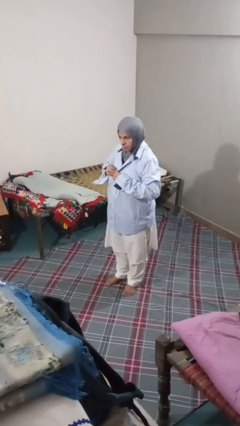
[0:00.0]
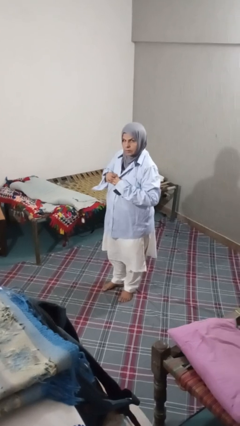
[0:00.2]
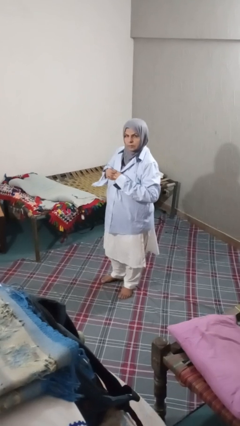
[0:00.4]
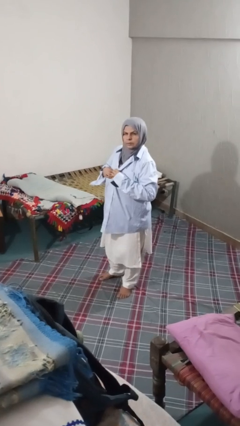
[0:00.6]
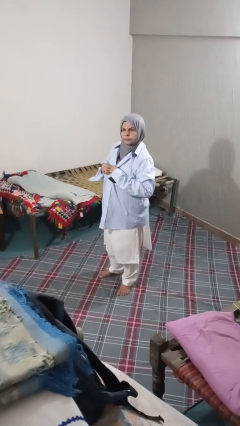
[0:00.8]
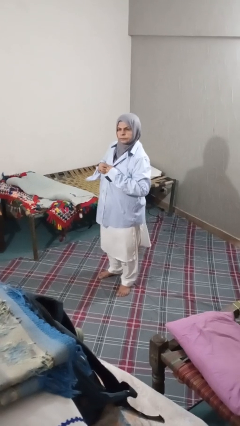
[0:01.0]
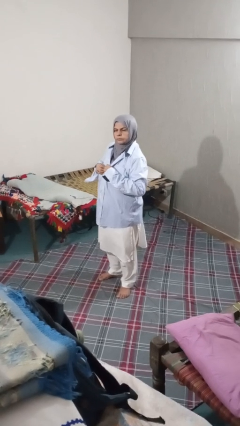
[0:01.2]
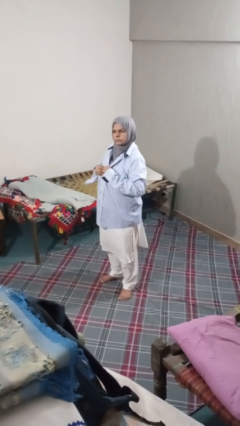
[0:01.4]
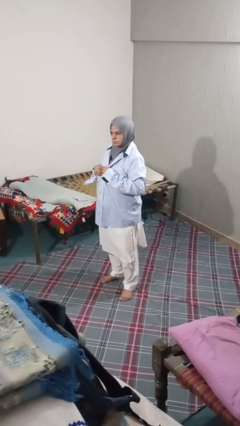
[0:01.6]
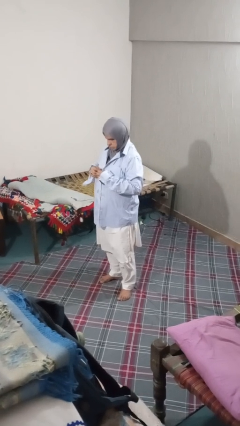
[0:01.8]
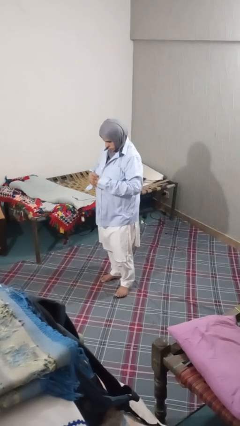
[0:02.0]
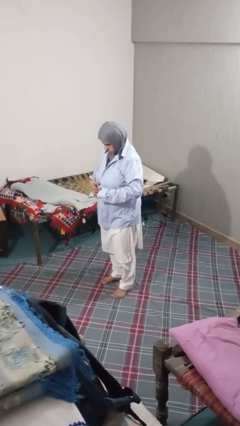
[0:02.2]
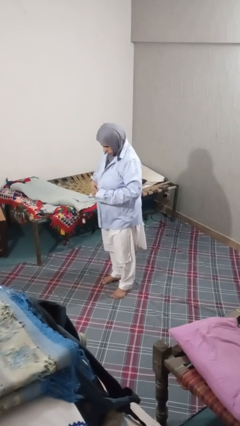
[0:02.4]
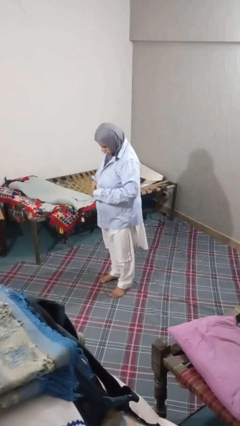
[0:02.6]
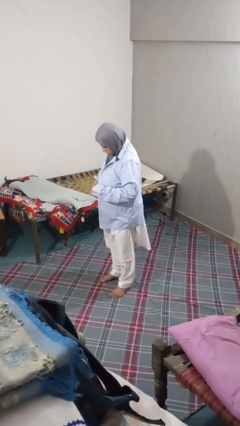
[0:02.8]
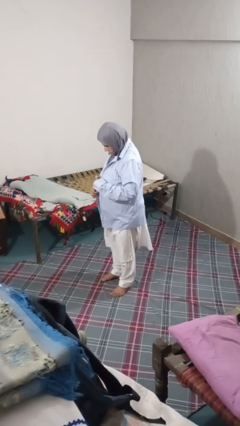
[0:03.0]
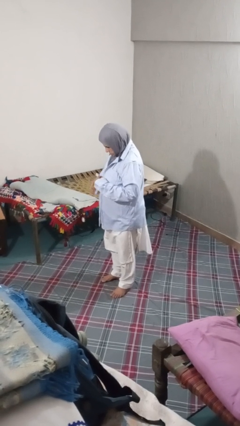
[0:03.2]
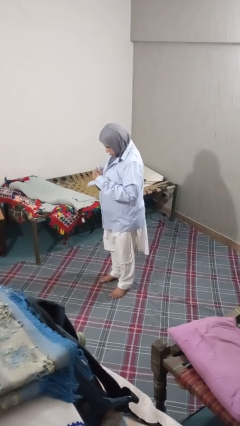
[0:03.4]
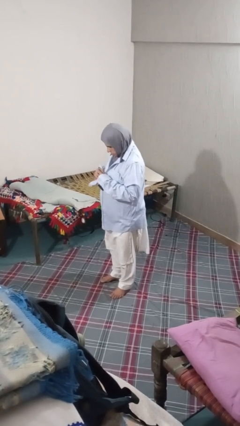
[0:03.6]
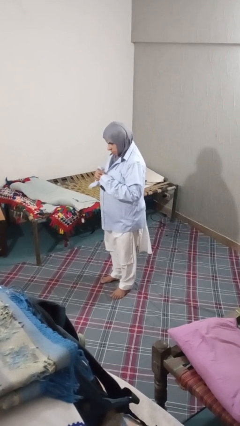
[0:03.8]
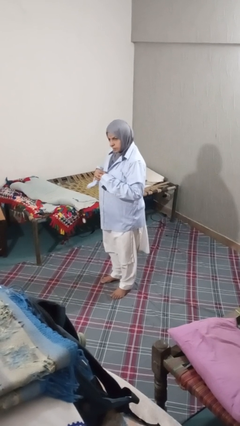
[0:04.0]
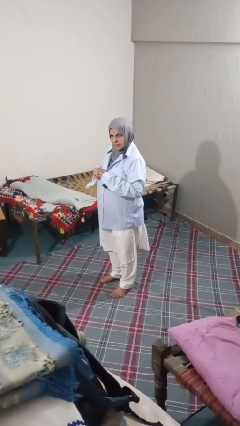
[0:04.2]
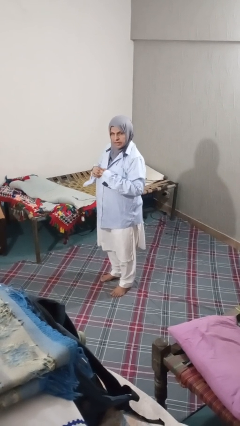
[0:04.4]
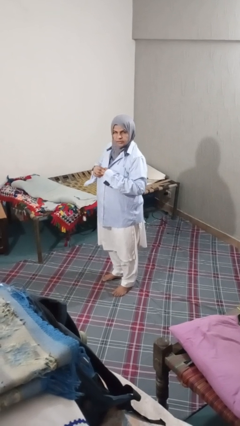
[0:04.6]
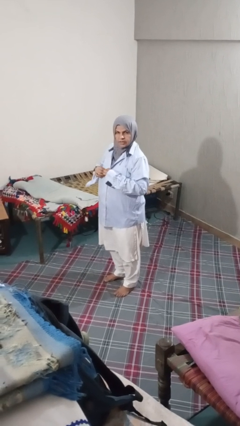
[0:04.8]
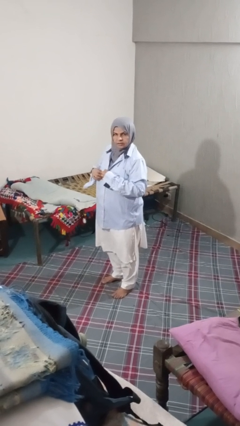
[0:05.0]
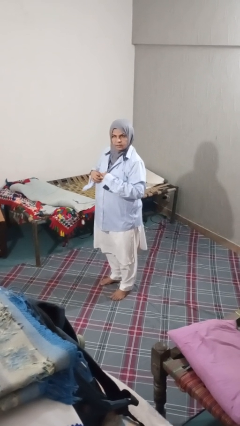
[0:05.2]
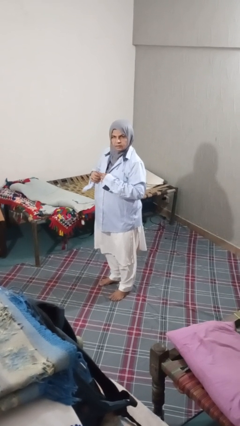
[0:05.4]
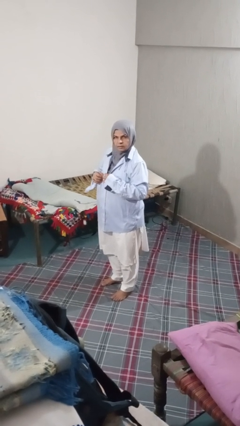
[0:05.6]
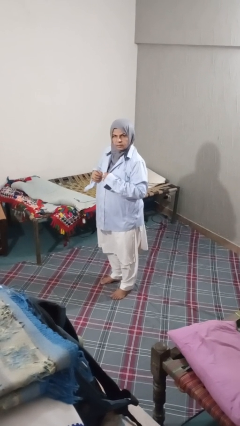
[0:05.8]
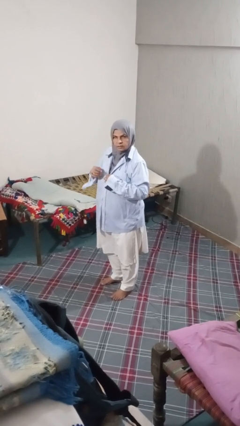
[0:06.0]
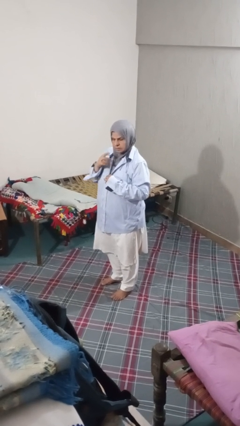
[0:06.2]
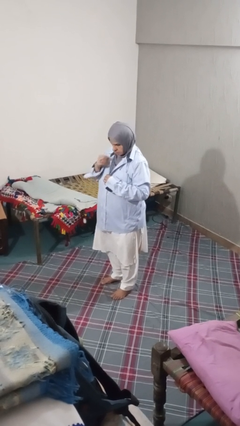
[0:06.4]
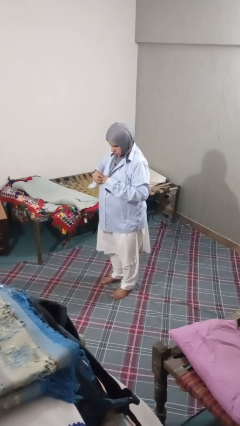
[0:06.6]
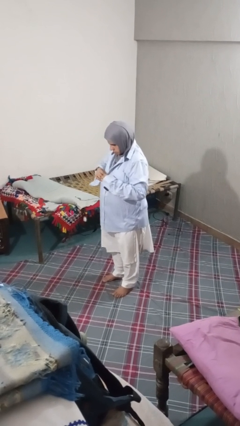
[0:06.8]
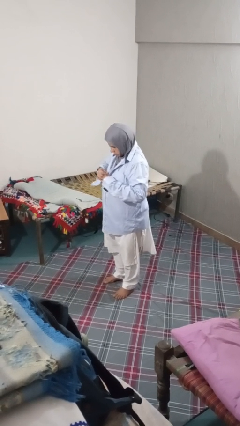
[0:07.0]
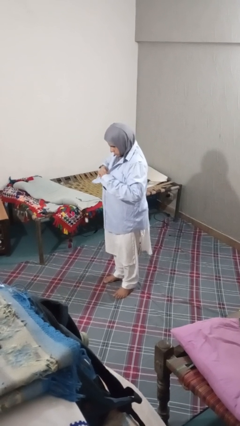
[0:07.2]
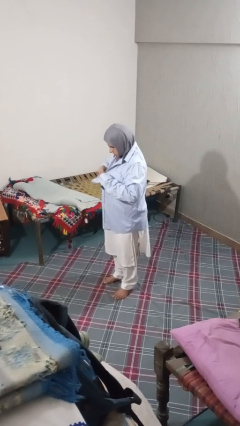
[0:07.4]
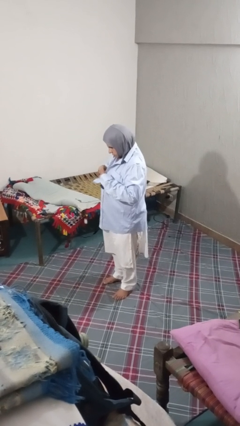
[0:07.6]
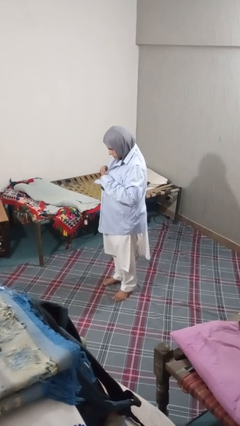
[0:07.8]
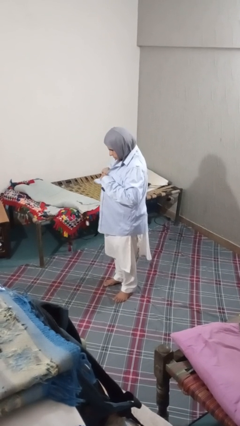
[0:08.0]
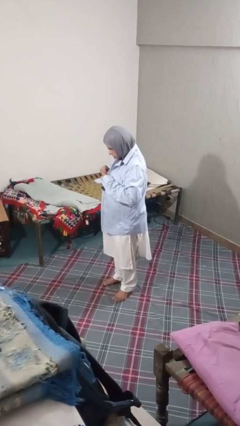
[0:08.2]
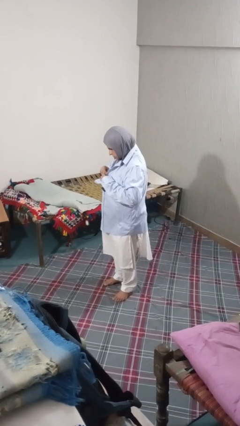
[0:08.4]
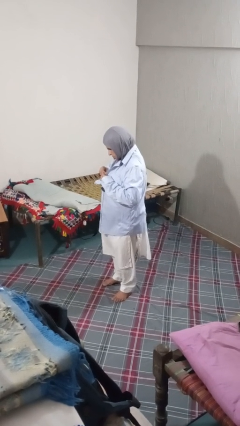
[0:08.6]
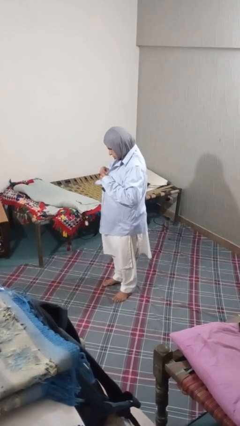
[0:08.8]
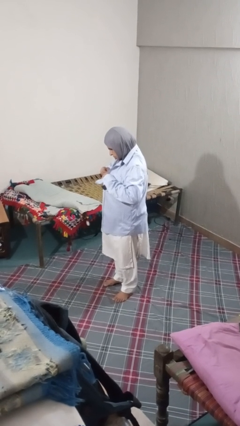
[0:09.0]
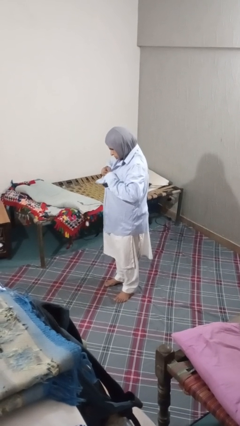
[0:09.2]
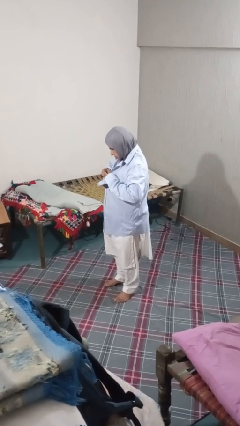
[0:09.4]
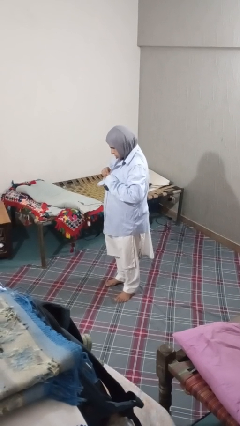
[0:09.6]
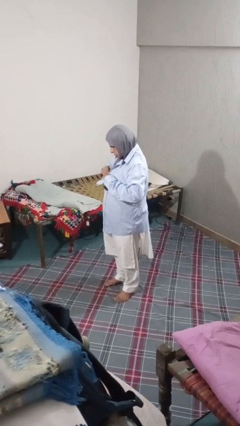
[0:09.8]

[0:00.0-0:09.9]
person buttons shirt

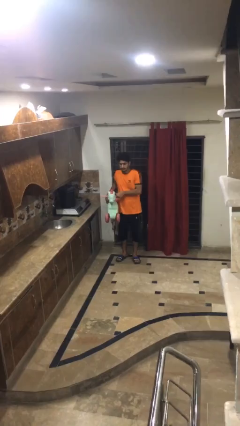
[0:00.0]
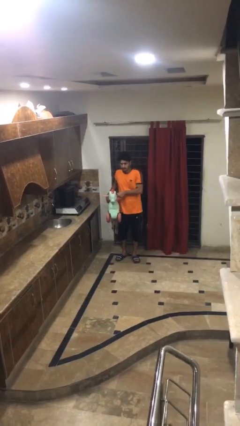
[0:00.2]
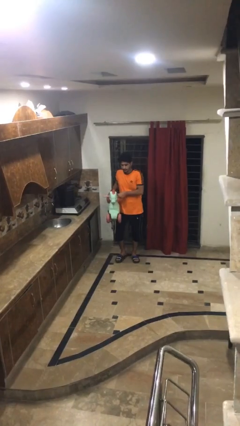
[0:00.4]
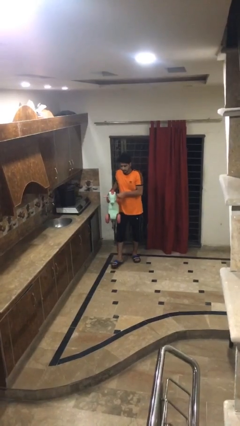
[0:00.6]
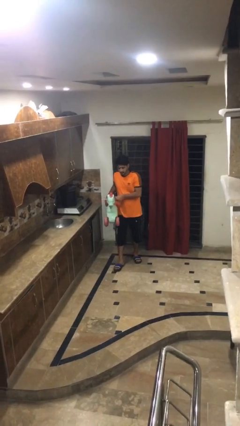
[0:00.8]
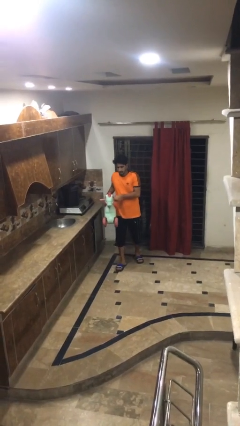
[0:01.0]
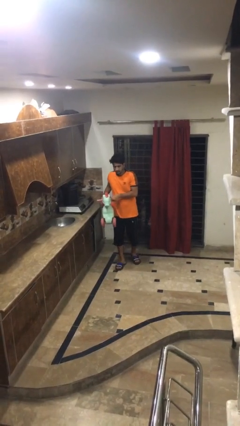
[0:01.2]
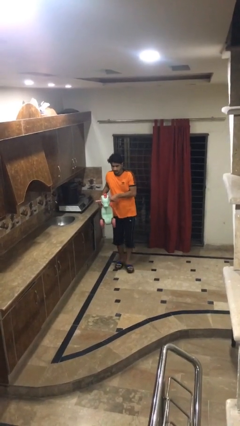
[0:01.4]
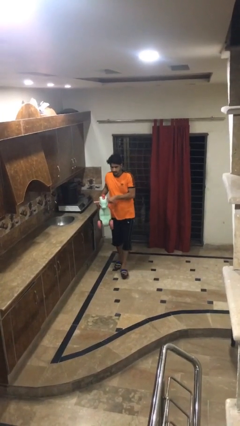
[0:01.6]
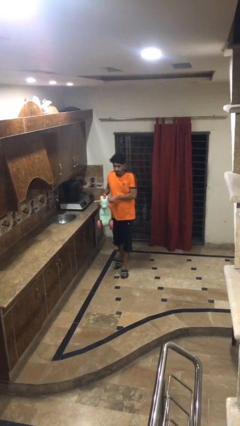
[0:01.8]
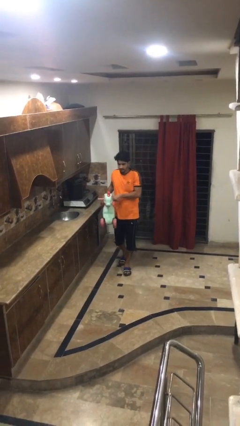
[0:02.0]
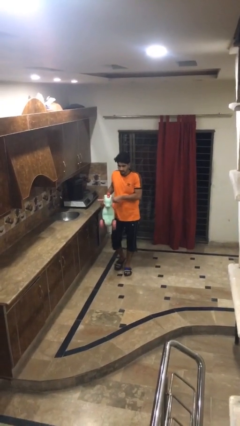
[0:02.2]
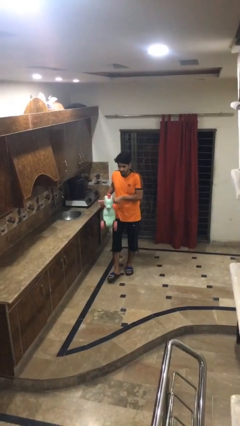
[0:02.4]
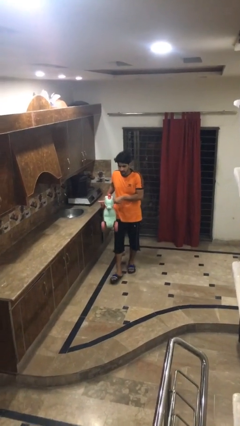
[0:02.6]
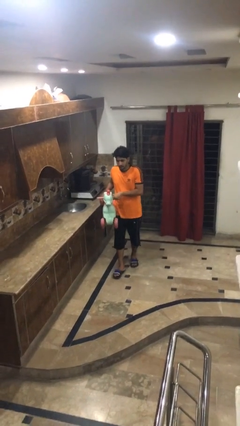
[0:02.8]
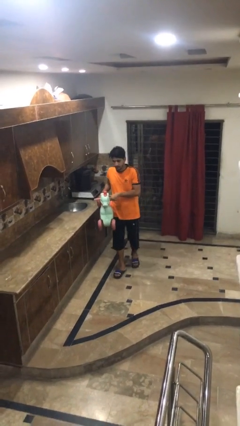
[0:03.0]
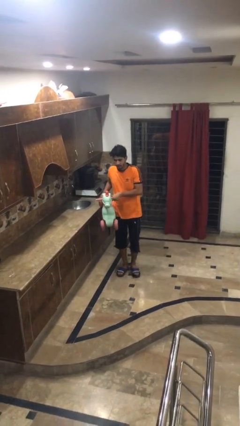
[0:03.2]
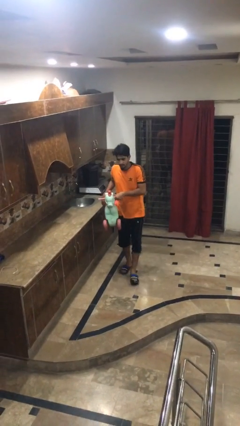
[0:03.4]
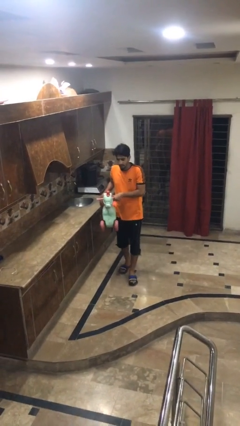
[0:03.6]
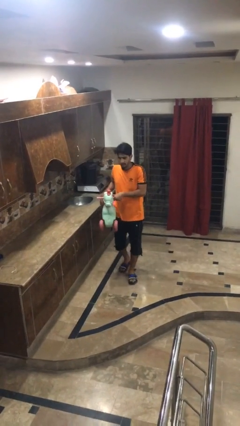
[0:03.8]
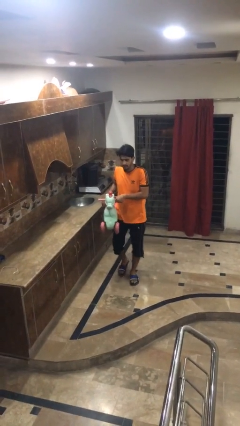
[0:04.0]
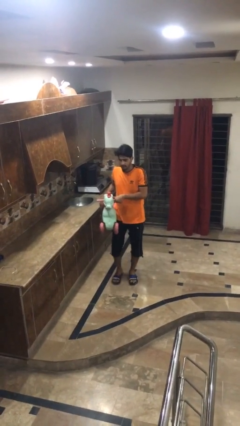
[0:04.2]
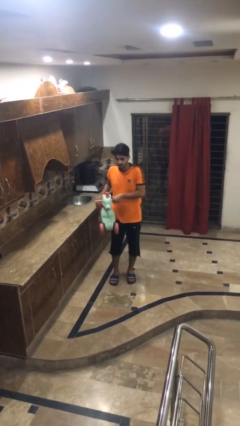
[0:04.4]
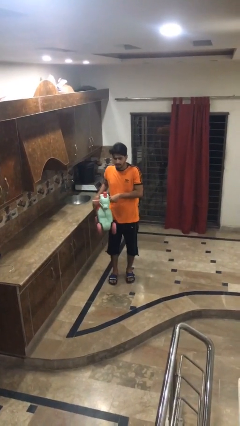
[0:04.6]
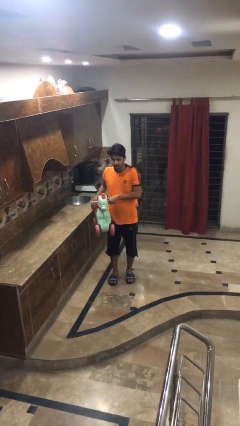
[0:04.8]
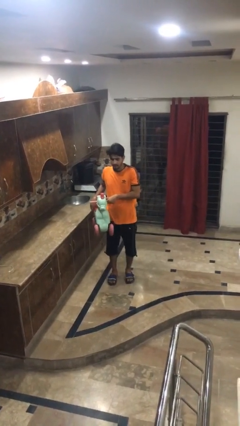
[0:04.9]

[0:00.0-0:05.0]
person carries bicycle

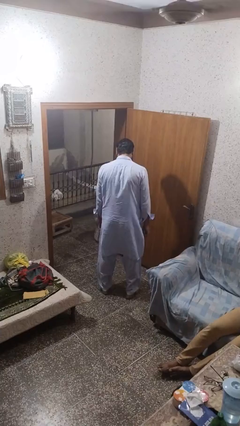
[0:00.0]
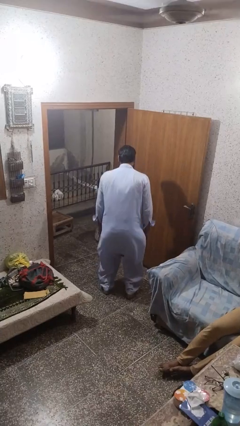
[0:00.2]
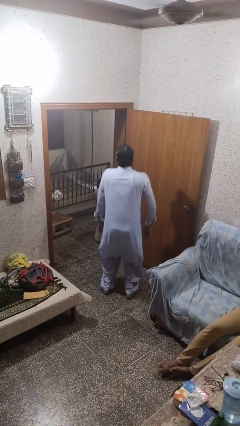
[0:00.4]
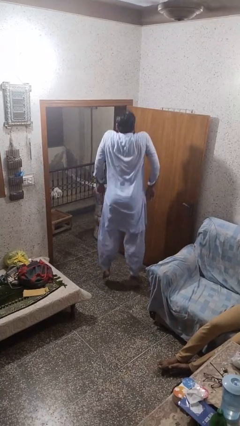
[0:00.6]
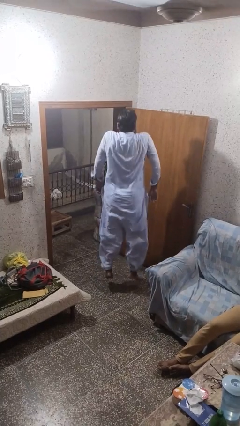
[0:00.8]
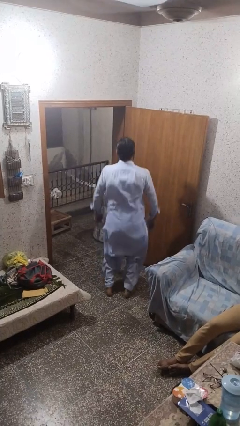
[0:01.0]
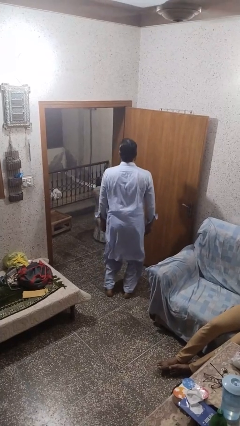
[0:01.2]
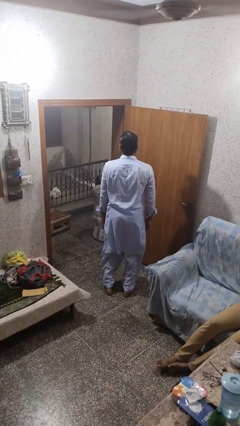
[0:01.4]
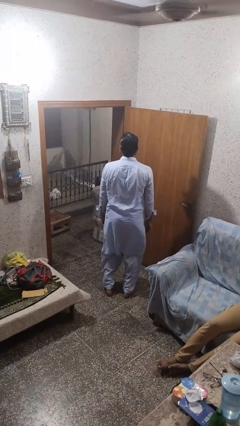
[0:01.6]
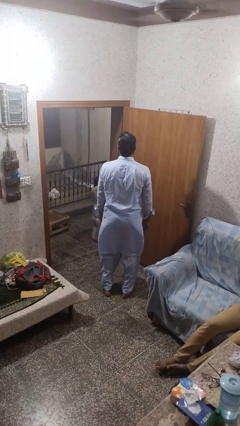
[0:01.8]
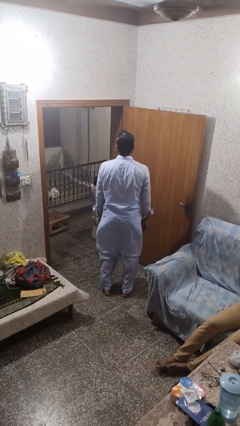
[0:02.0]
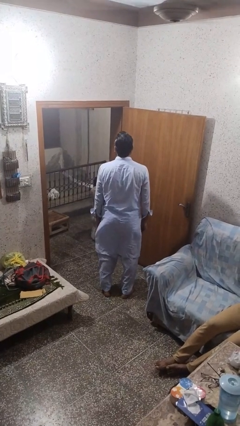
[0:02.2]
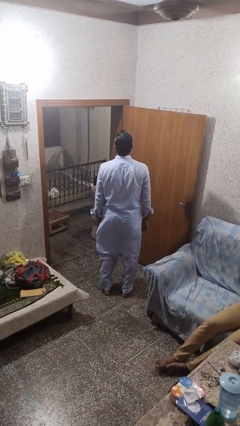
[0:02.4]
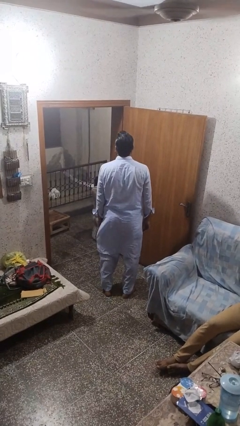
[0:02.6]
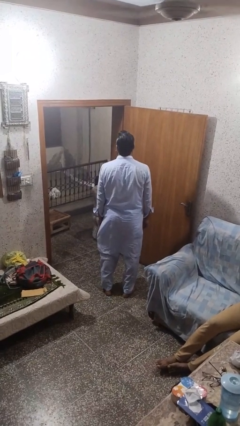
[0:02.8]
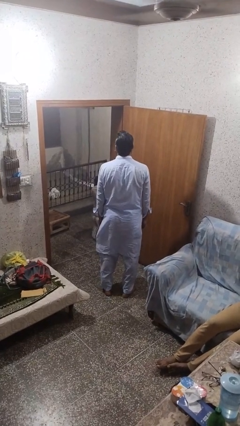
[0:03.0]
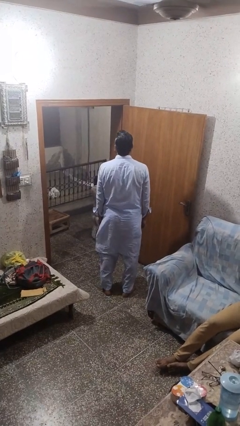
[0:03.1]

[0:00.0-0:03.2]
person jumps
